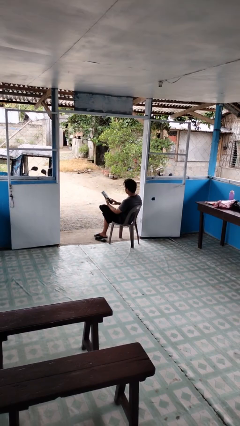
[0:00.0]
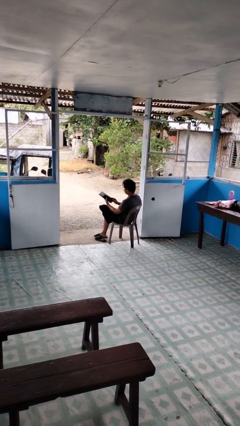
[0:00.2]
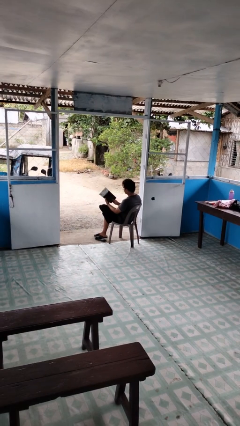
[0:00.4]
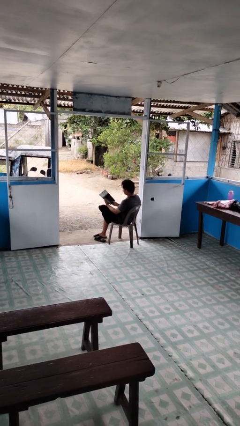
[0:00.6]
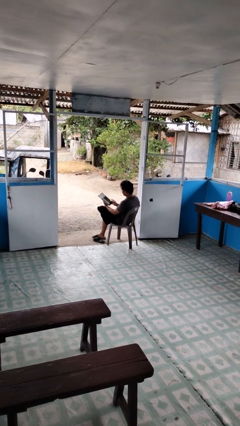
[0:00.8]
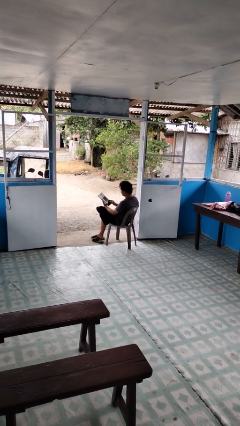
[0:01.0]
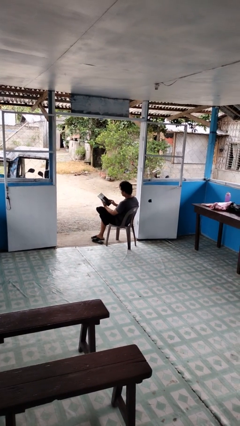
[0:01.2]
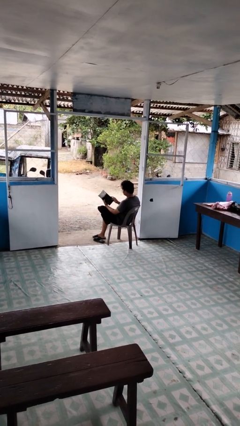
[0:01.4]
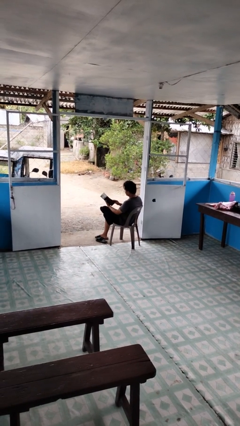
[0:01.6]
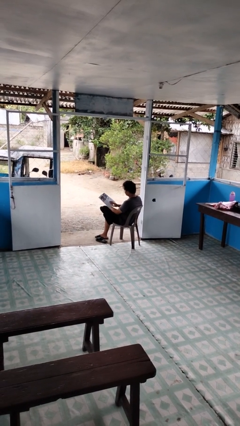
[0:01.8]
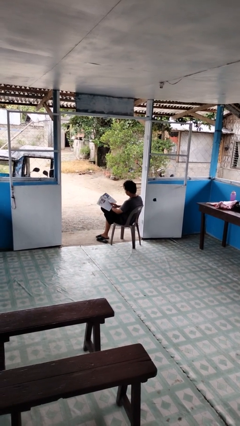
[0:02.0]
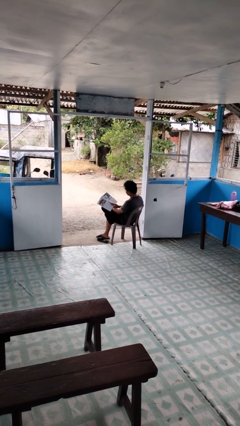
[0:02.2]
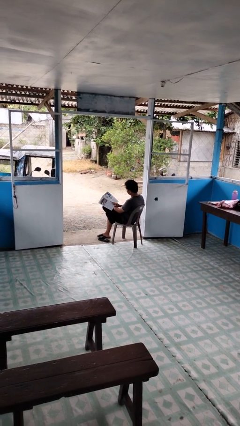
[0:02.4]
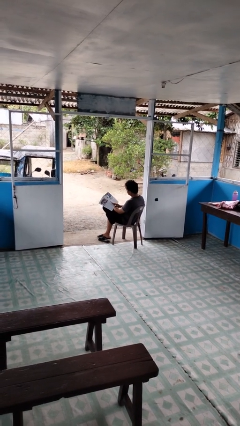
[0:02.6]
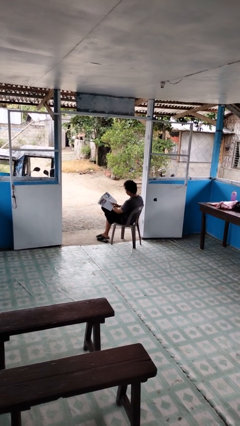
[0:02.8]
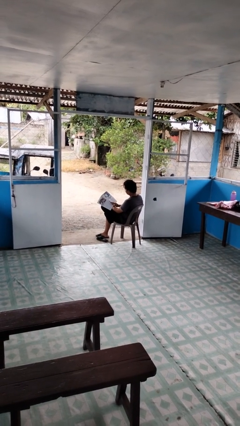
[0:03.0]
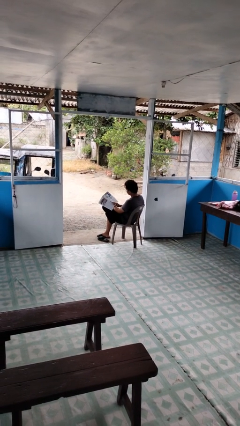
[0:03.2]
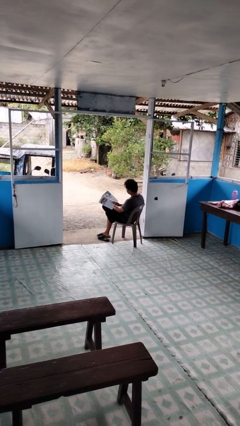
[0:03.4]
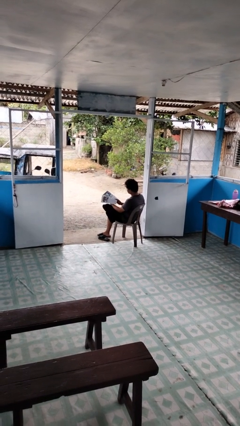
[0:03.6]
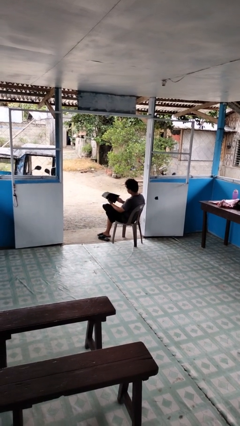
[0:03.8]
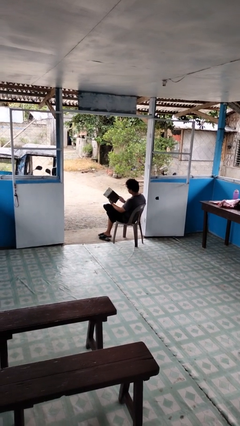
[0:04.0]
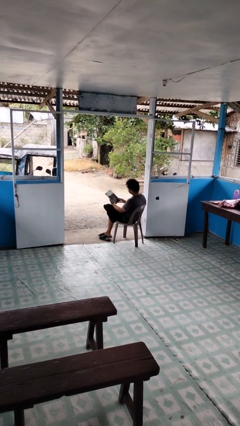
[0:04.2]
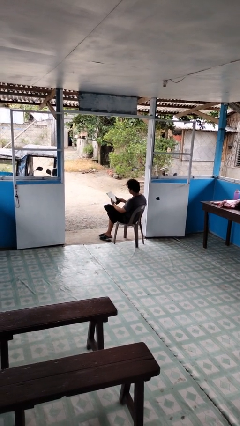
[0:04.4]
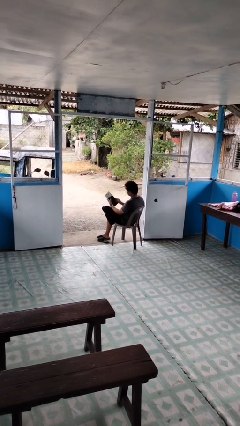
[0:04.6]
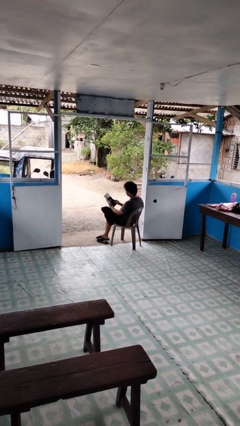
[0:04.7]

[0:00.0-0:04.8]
person reads magazine

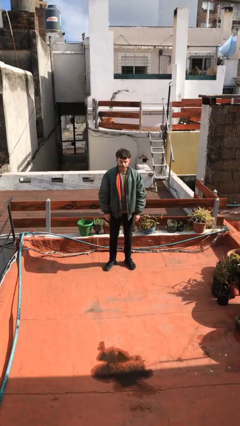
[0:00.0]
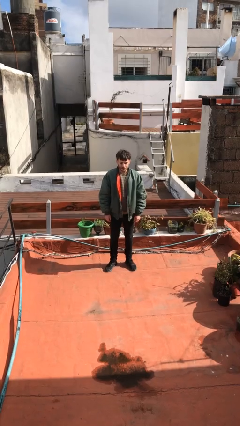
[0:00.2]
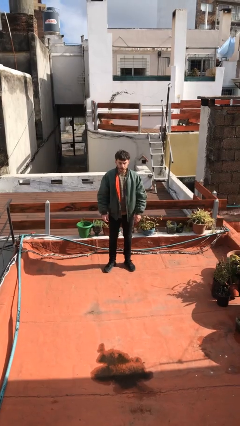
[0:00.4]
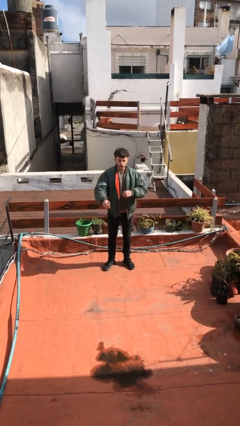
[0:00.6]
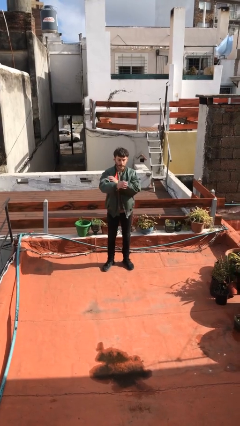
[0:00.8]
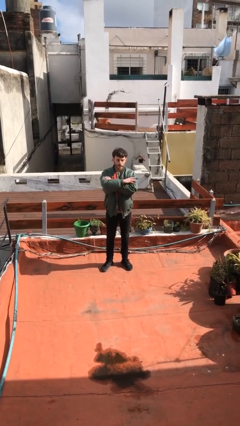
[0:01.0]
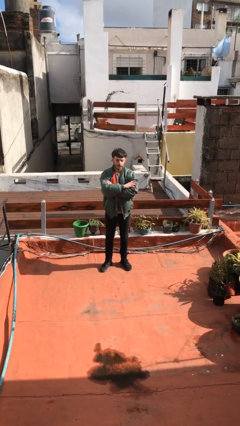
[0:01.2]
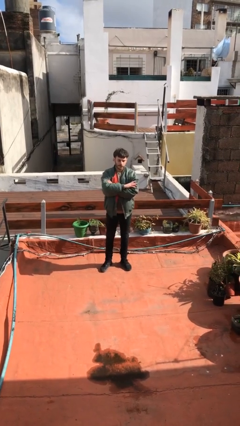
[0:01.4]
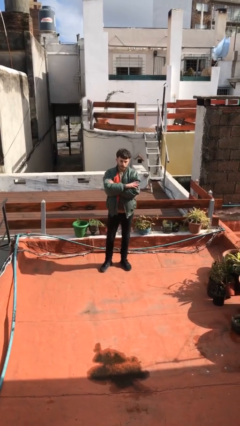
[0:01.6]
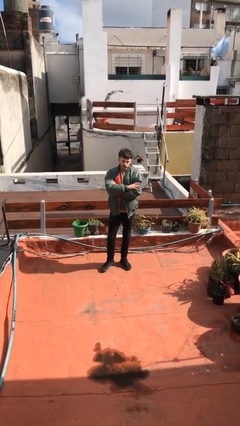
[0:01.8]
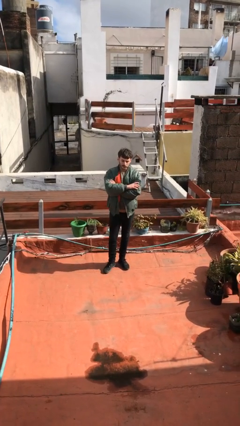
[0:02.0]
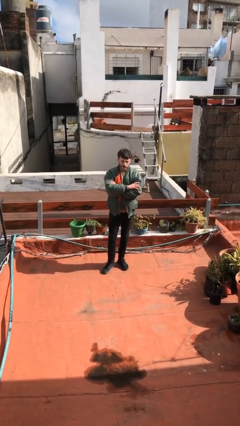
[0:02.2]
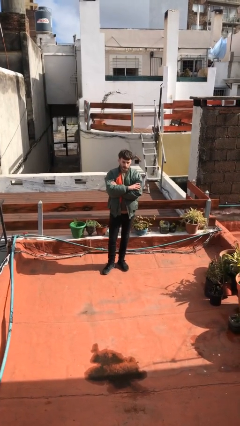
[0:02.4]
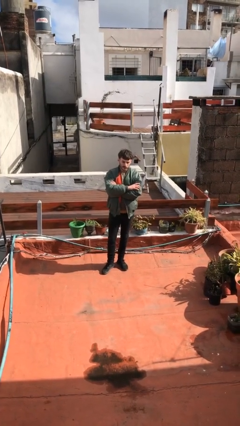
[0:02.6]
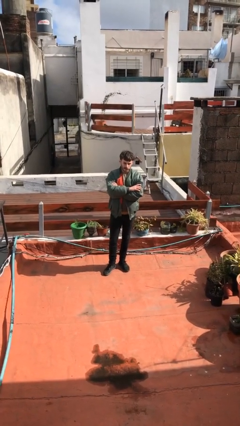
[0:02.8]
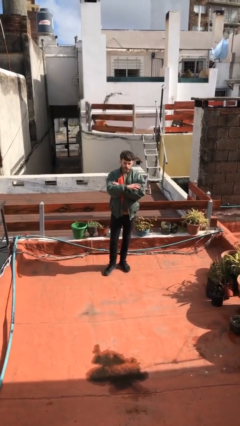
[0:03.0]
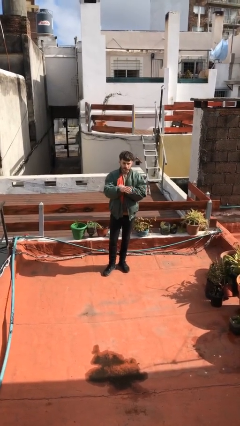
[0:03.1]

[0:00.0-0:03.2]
person crosses arms

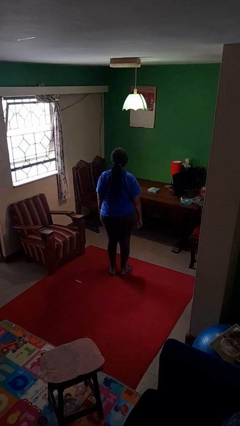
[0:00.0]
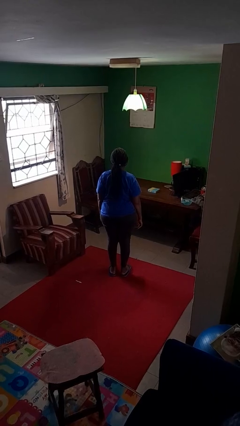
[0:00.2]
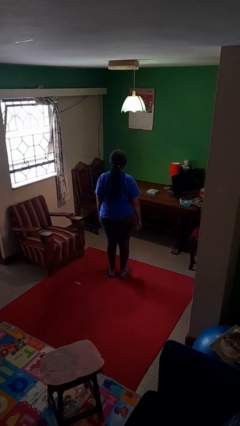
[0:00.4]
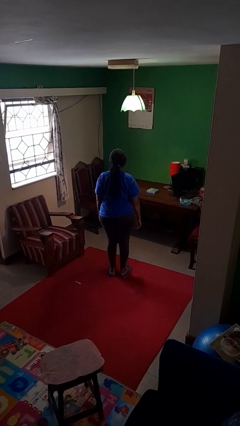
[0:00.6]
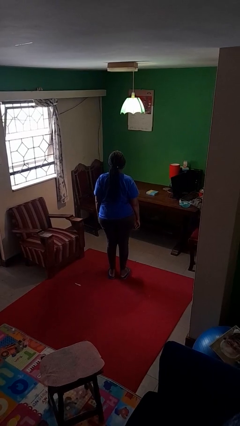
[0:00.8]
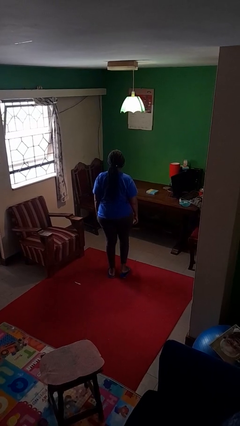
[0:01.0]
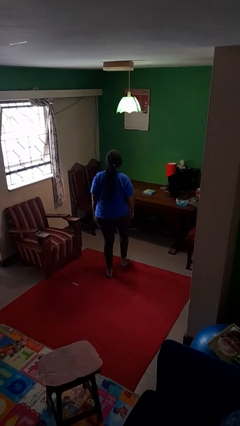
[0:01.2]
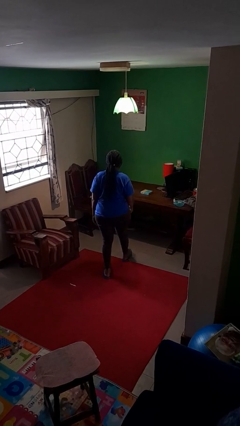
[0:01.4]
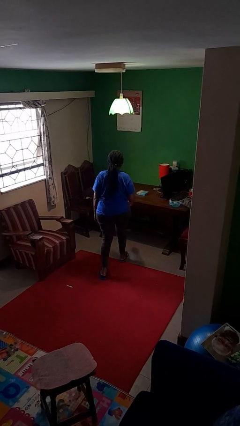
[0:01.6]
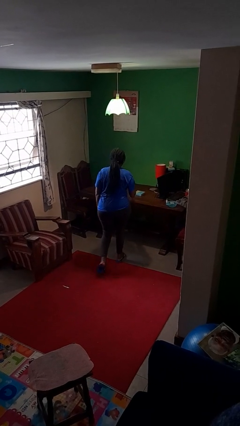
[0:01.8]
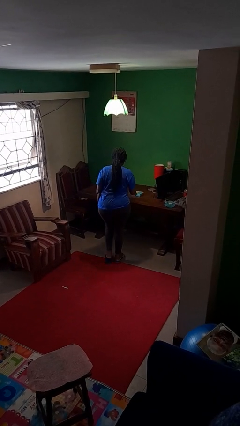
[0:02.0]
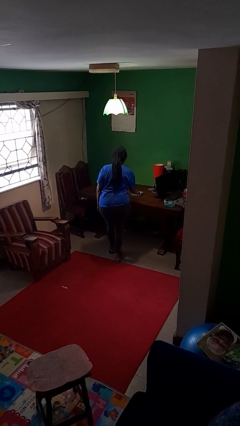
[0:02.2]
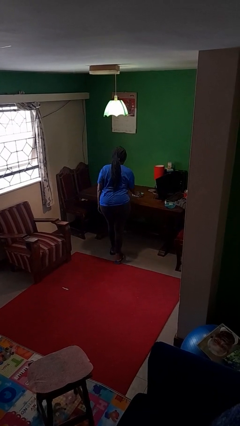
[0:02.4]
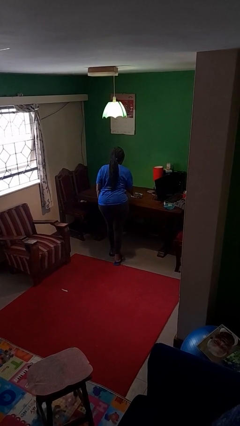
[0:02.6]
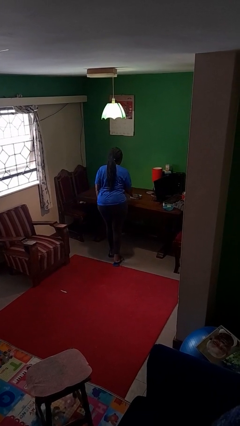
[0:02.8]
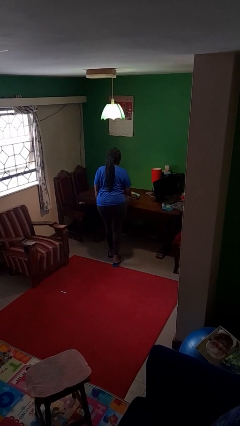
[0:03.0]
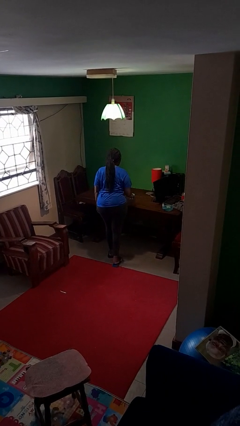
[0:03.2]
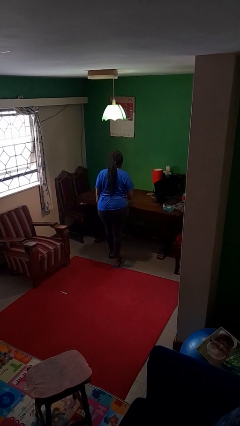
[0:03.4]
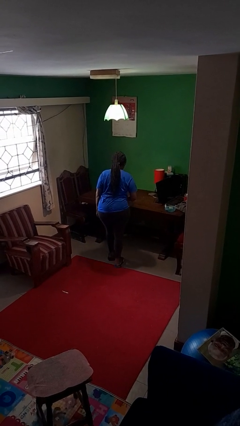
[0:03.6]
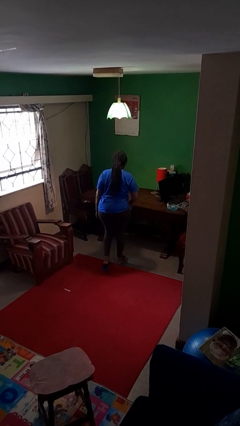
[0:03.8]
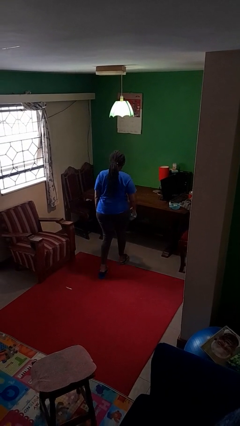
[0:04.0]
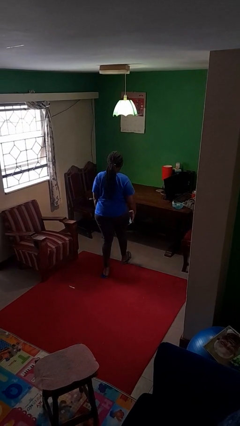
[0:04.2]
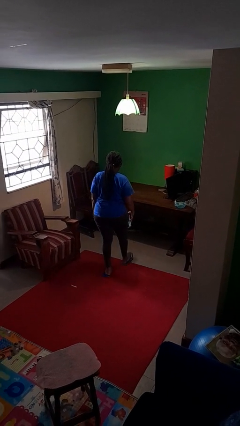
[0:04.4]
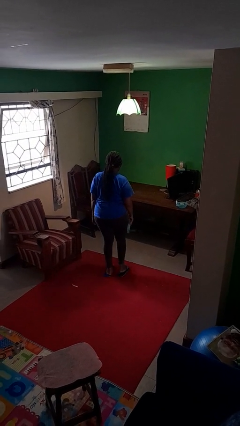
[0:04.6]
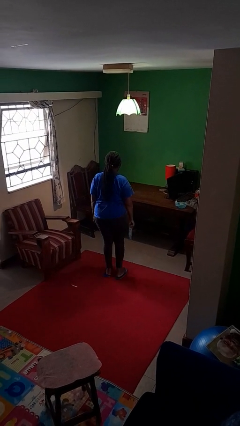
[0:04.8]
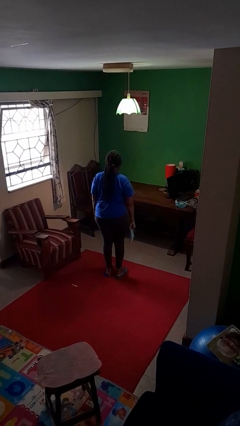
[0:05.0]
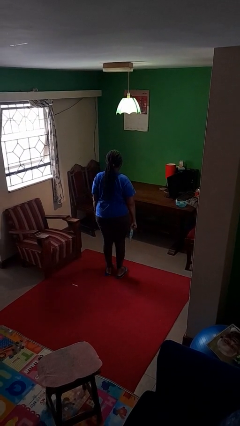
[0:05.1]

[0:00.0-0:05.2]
person picks up object from table

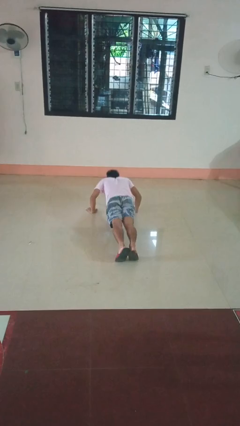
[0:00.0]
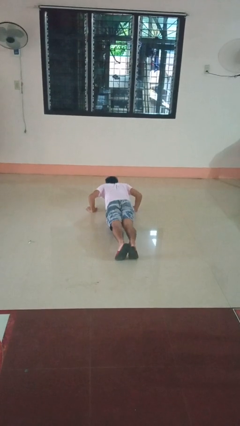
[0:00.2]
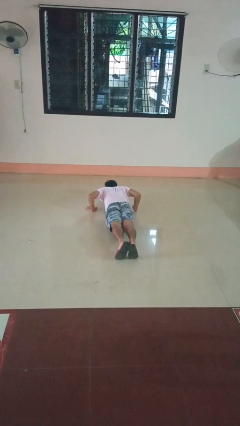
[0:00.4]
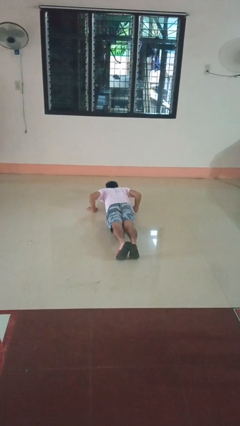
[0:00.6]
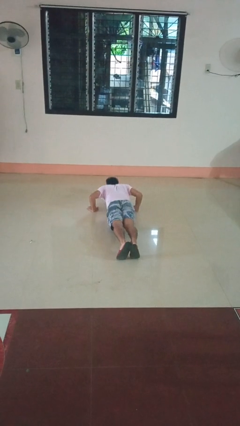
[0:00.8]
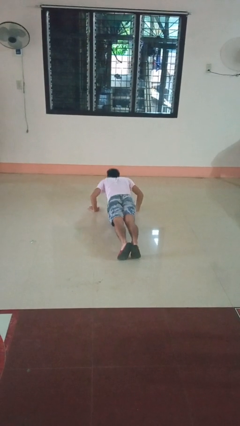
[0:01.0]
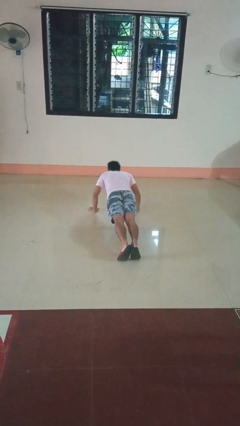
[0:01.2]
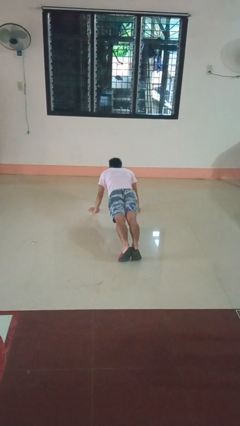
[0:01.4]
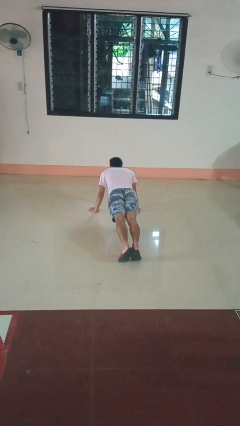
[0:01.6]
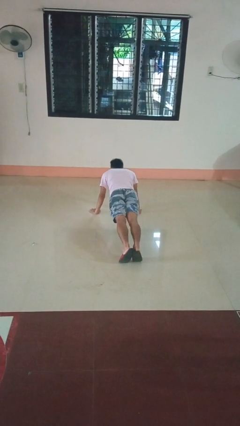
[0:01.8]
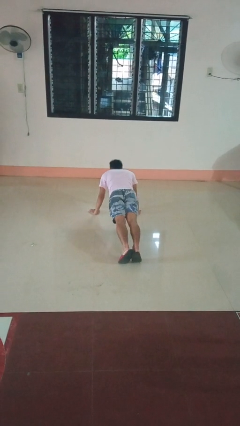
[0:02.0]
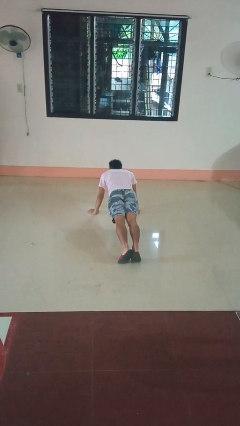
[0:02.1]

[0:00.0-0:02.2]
person exercises with pushup

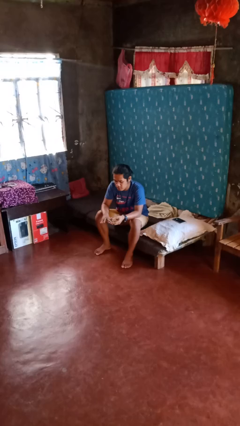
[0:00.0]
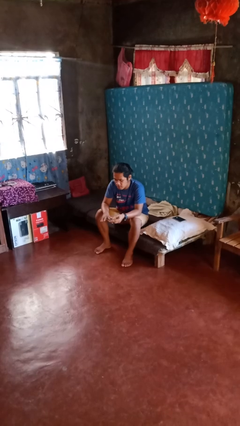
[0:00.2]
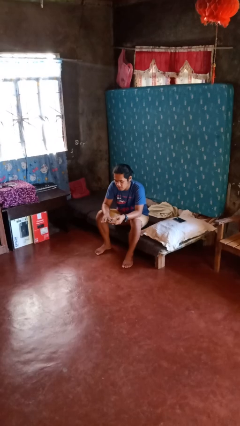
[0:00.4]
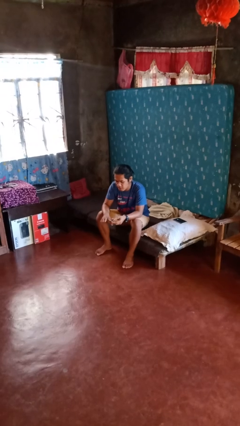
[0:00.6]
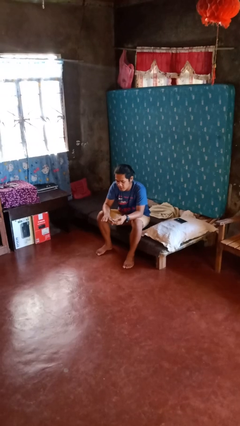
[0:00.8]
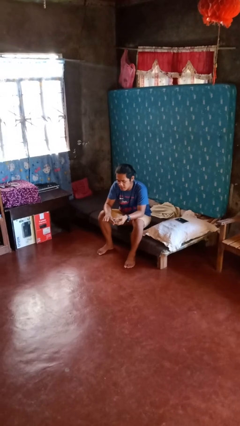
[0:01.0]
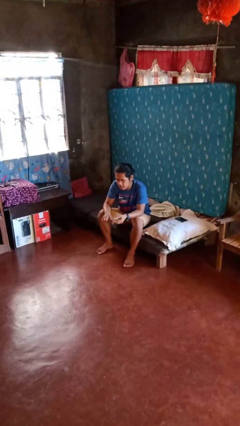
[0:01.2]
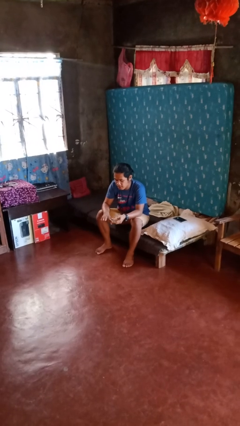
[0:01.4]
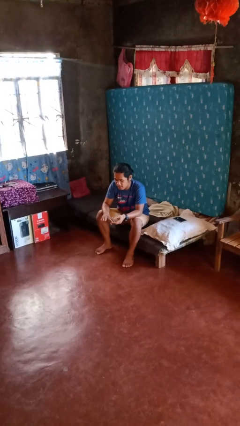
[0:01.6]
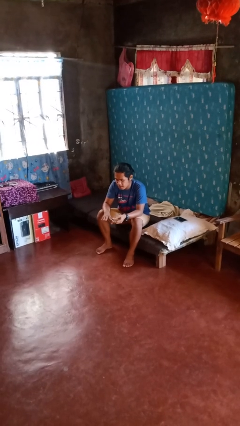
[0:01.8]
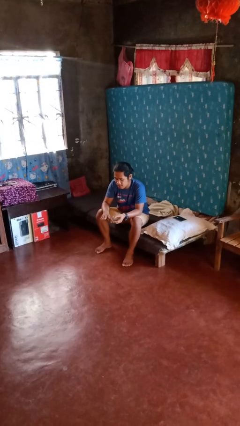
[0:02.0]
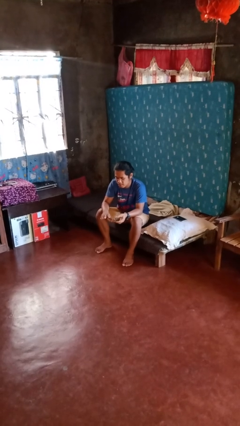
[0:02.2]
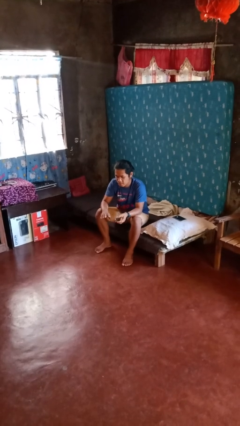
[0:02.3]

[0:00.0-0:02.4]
person clips fingernails
